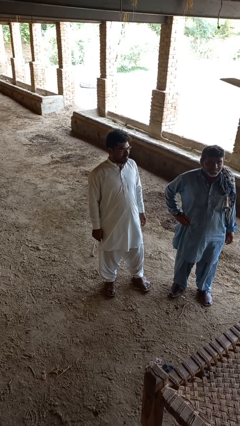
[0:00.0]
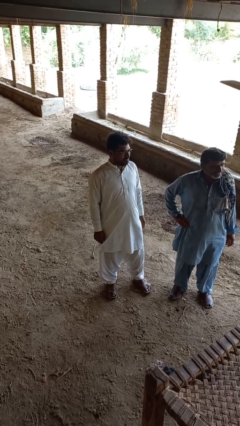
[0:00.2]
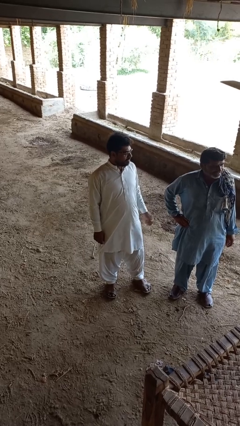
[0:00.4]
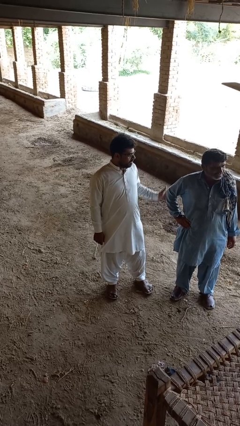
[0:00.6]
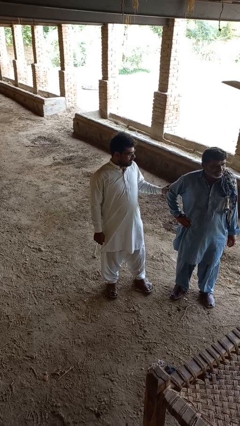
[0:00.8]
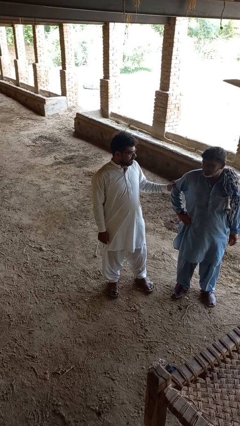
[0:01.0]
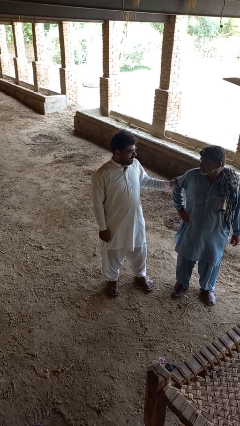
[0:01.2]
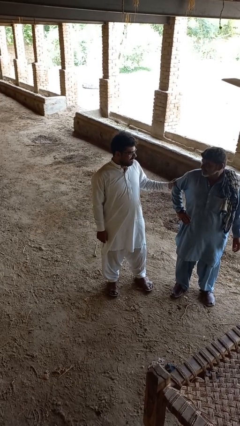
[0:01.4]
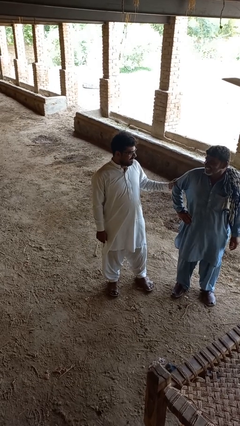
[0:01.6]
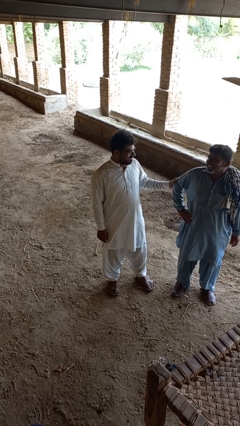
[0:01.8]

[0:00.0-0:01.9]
person grabs person by forearm

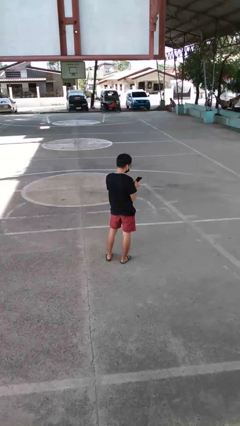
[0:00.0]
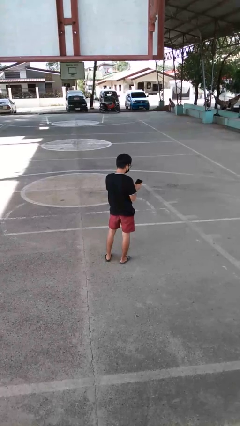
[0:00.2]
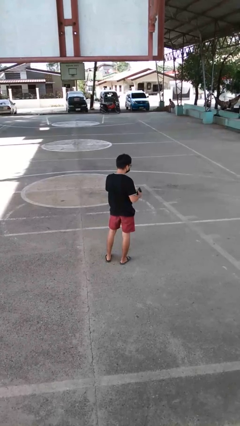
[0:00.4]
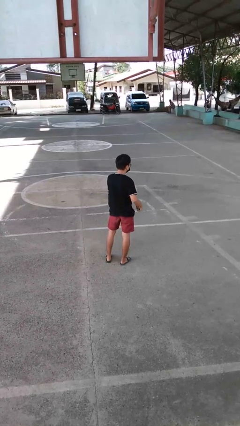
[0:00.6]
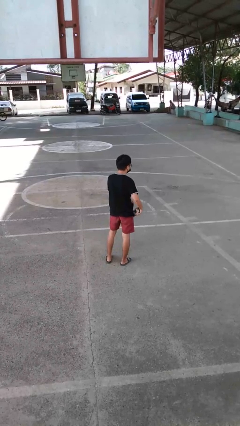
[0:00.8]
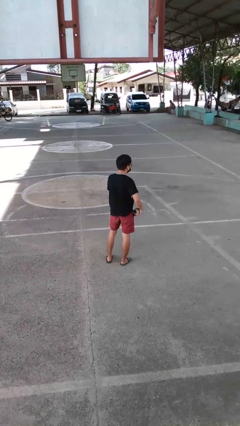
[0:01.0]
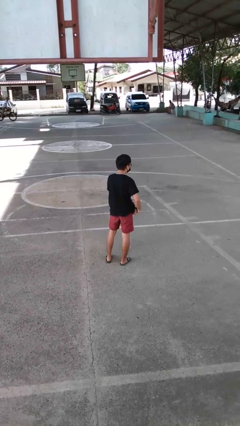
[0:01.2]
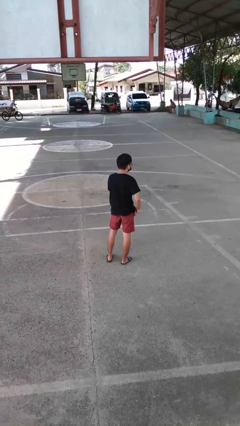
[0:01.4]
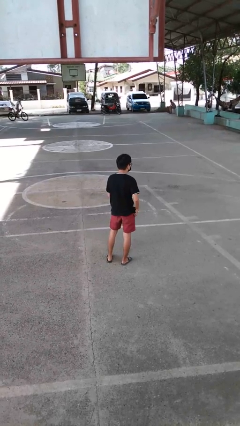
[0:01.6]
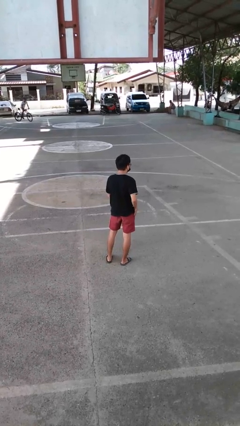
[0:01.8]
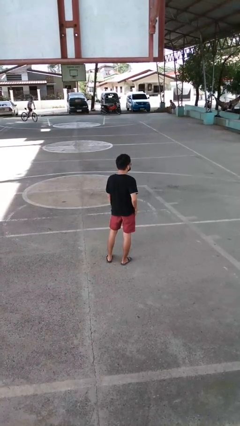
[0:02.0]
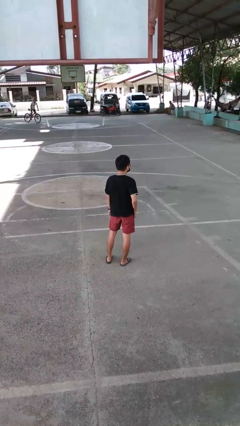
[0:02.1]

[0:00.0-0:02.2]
person puts phone into pocket

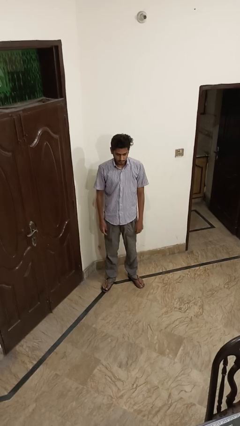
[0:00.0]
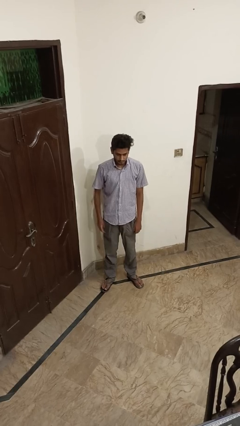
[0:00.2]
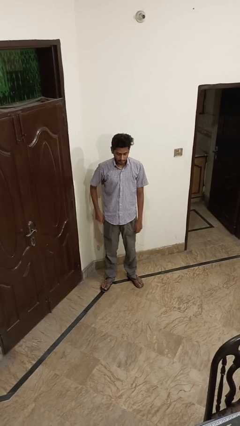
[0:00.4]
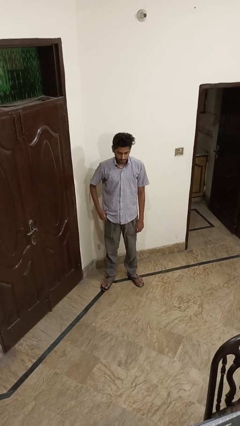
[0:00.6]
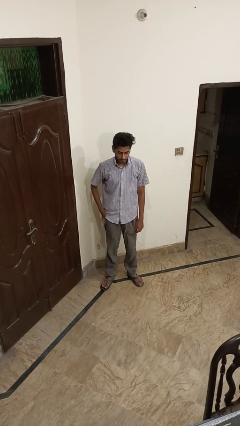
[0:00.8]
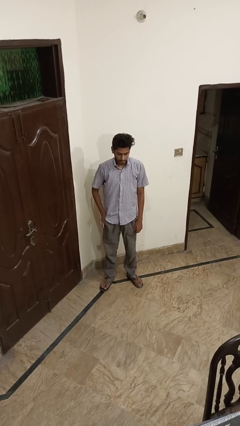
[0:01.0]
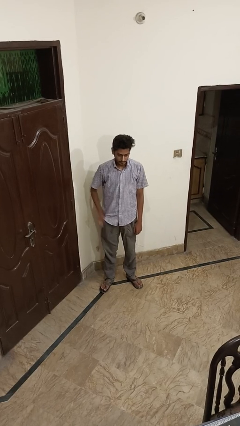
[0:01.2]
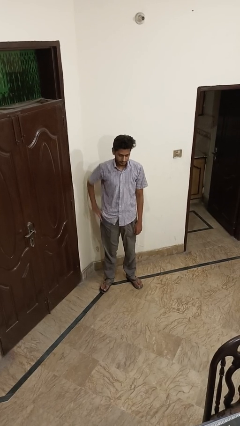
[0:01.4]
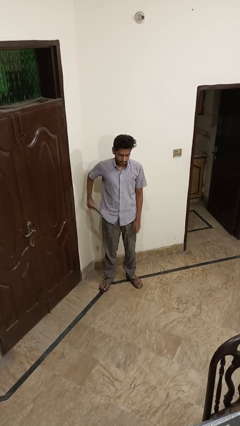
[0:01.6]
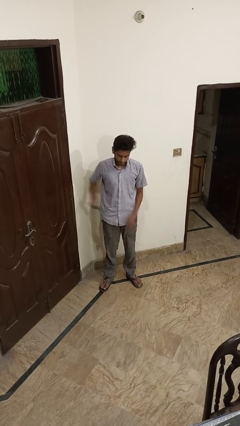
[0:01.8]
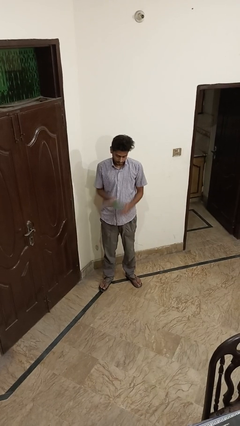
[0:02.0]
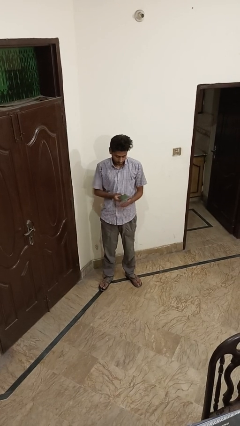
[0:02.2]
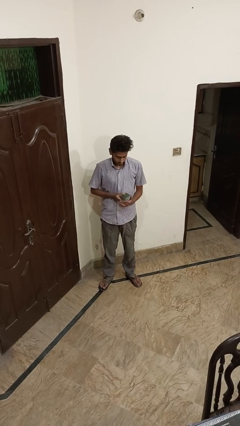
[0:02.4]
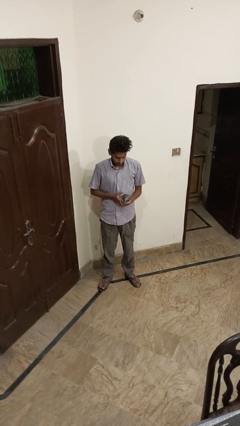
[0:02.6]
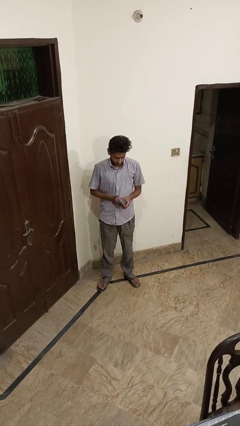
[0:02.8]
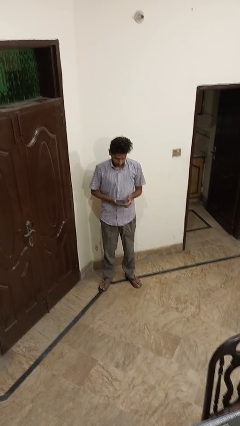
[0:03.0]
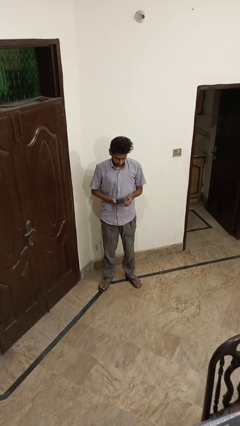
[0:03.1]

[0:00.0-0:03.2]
person takes phone from pocket

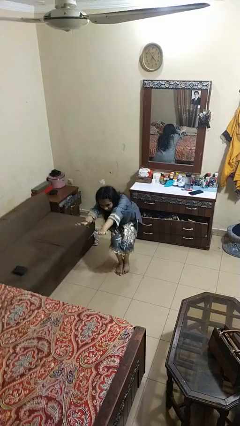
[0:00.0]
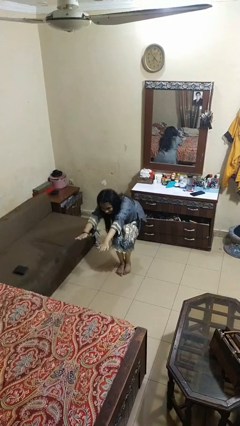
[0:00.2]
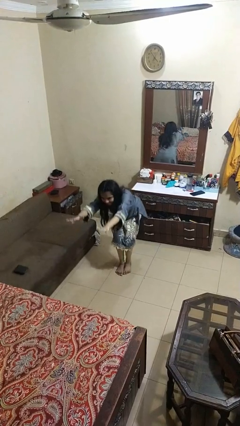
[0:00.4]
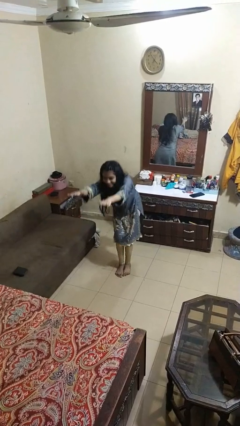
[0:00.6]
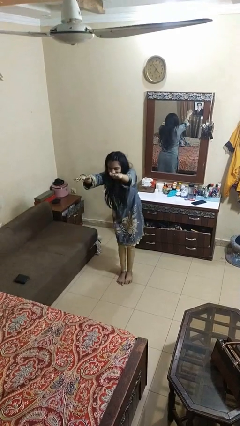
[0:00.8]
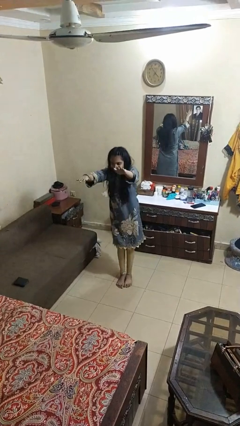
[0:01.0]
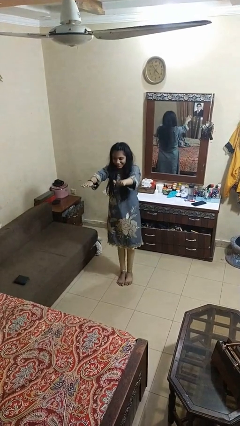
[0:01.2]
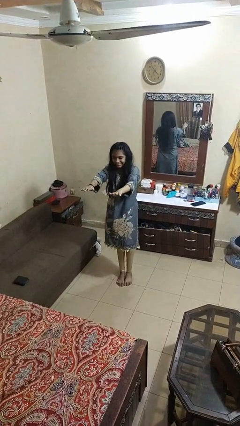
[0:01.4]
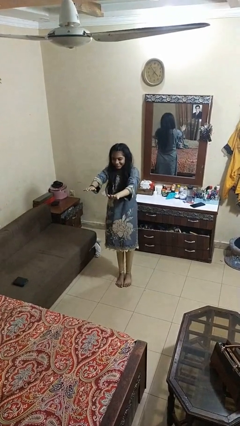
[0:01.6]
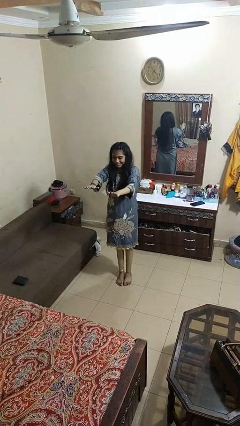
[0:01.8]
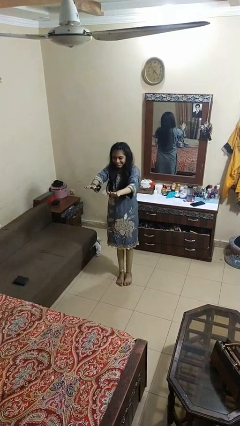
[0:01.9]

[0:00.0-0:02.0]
person stands up

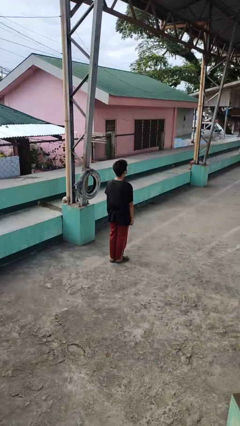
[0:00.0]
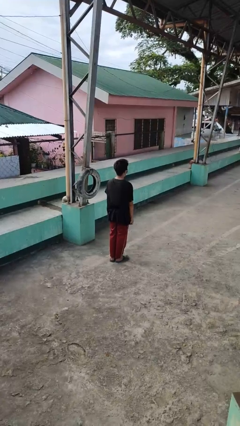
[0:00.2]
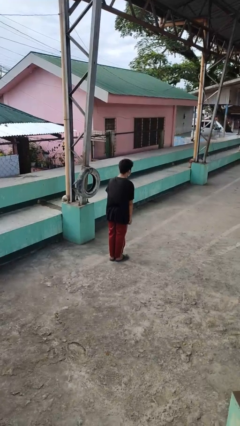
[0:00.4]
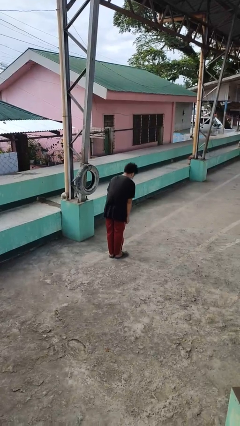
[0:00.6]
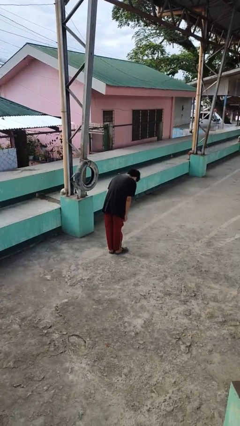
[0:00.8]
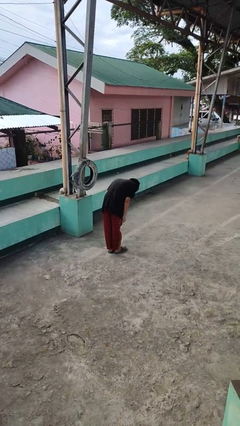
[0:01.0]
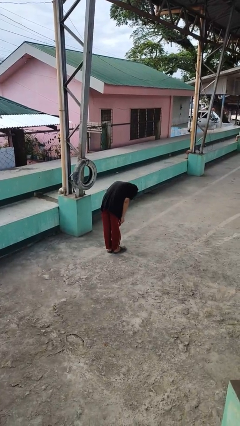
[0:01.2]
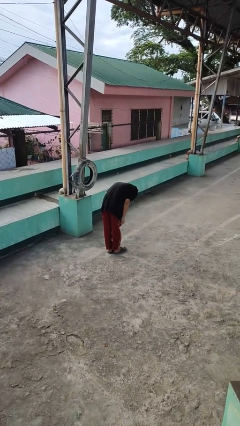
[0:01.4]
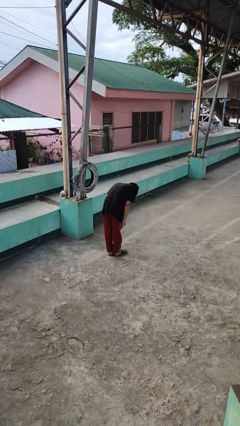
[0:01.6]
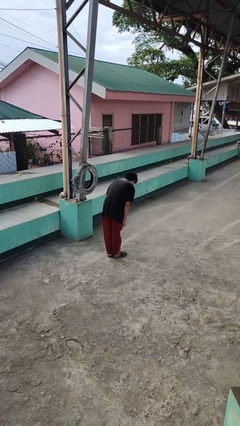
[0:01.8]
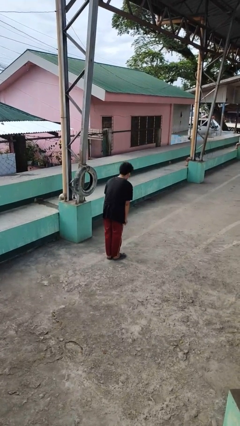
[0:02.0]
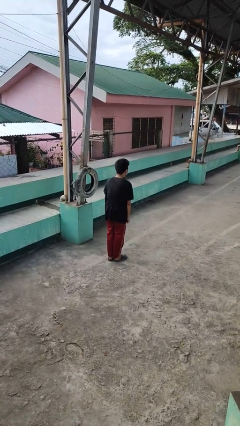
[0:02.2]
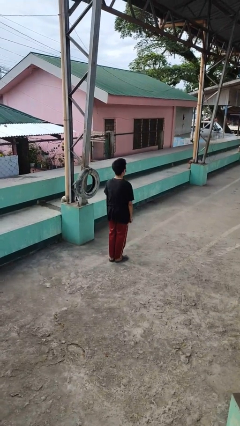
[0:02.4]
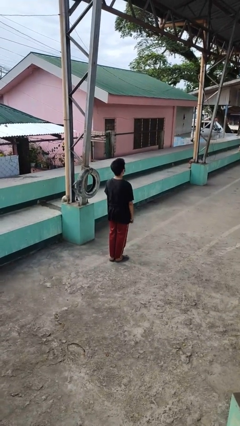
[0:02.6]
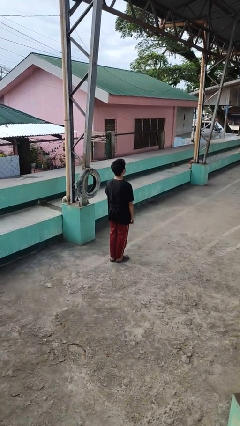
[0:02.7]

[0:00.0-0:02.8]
person bows

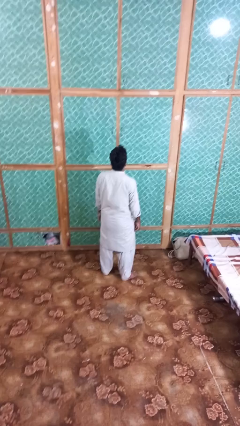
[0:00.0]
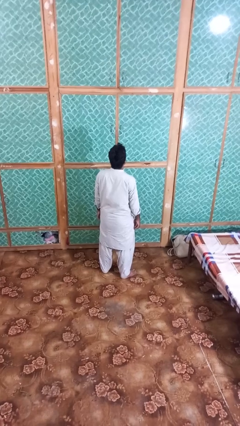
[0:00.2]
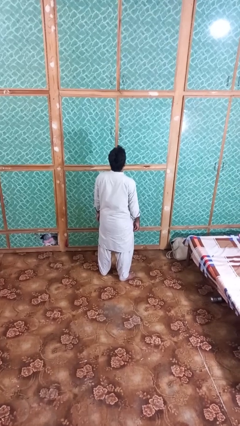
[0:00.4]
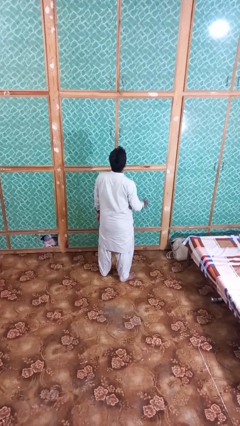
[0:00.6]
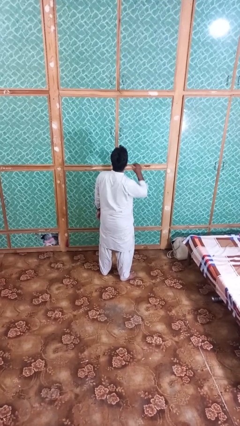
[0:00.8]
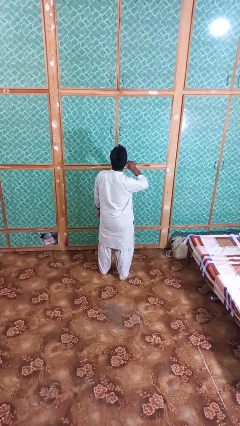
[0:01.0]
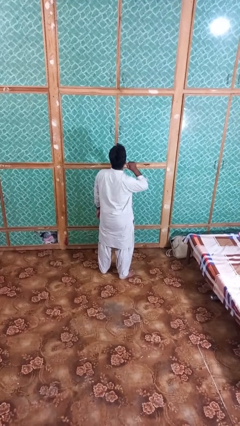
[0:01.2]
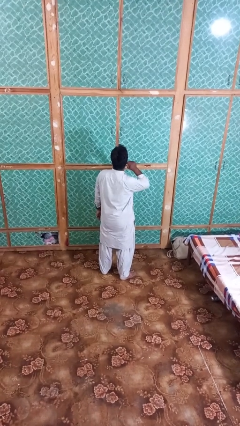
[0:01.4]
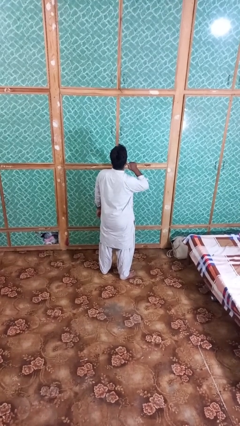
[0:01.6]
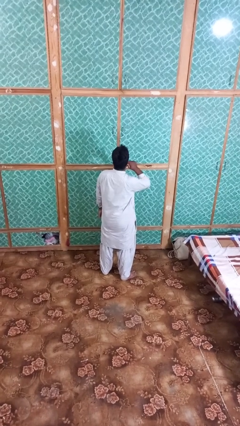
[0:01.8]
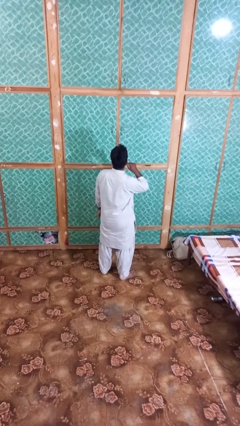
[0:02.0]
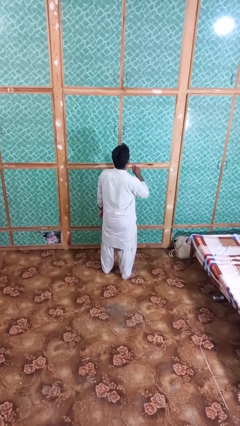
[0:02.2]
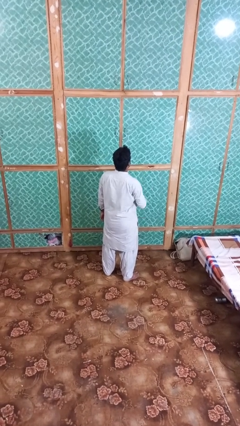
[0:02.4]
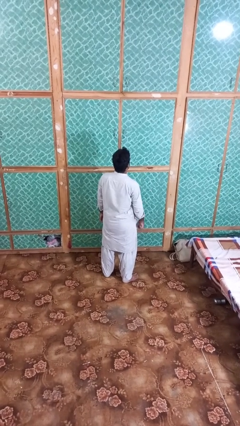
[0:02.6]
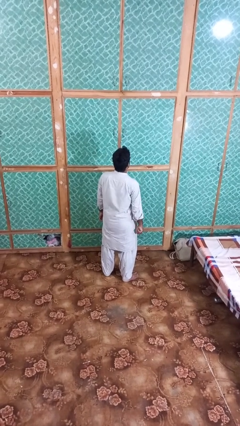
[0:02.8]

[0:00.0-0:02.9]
person touches earlobe

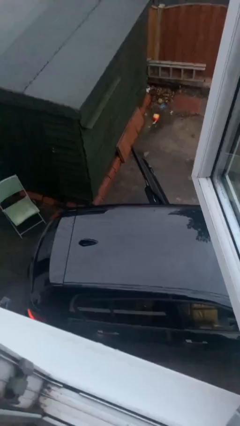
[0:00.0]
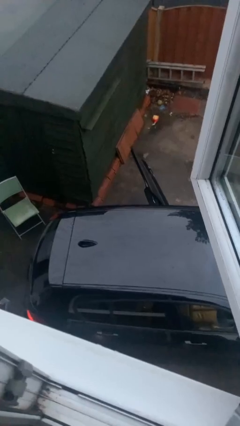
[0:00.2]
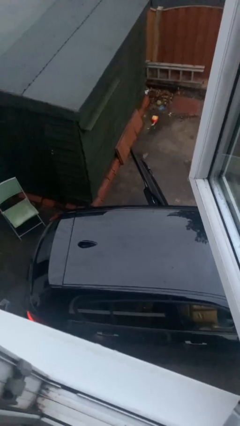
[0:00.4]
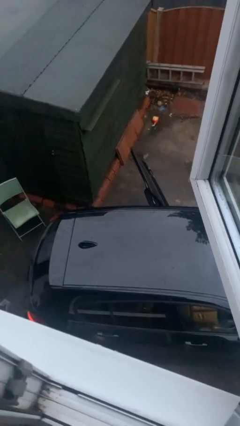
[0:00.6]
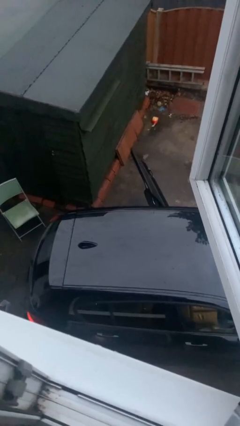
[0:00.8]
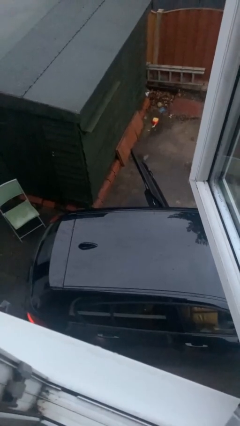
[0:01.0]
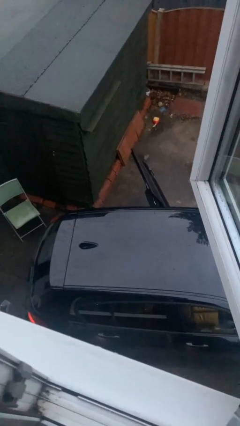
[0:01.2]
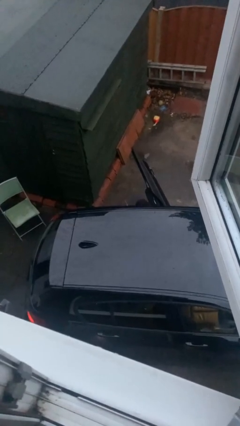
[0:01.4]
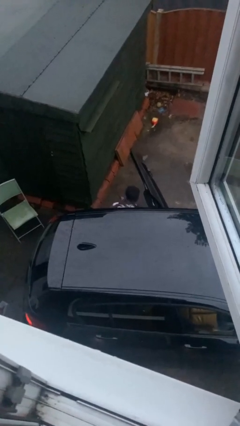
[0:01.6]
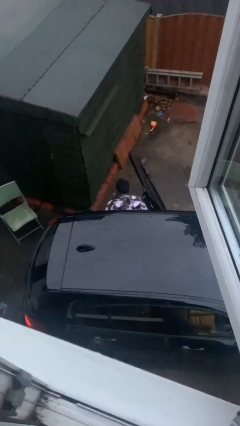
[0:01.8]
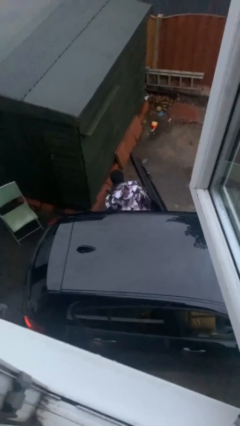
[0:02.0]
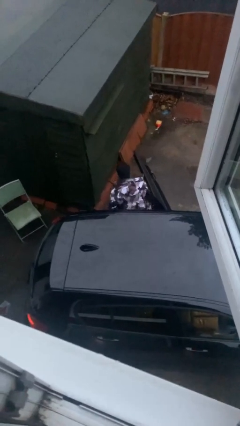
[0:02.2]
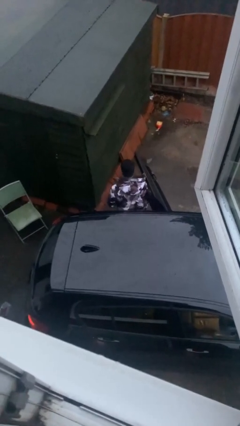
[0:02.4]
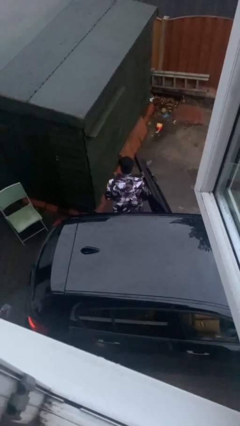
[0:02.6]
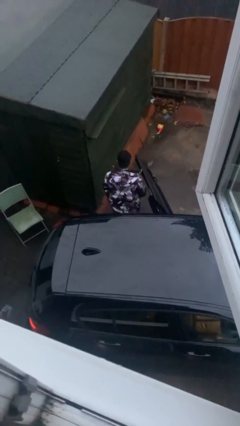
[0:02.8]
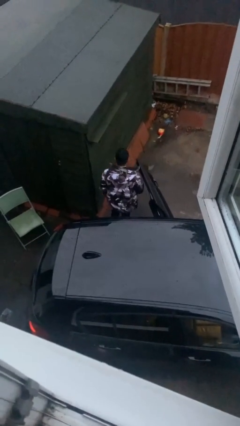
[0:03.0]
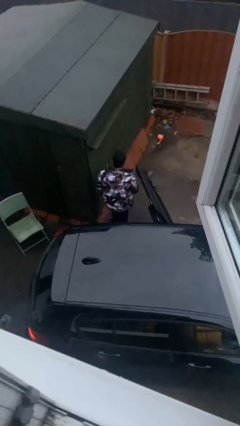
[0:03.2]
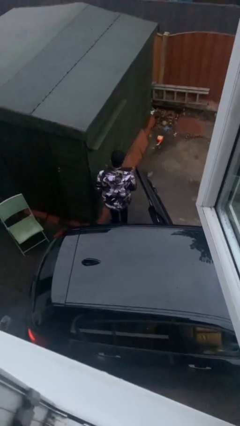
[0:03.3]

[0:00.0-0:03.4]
person exits car
